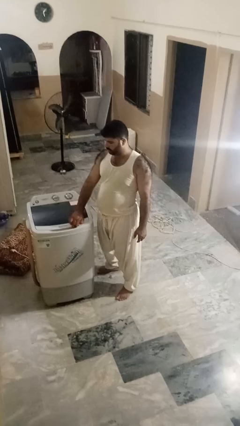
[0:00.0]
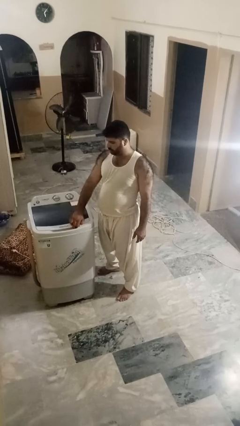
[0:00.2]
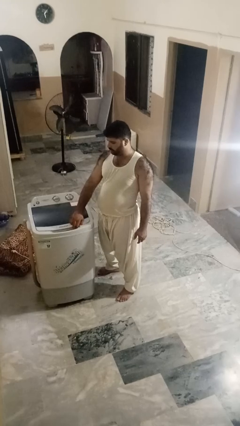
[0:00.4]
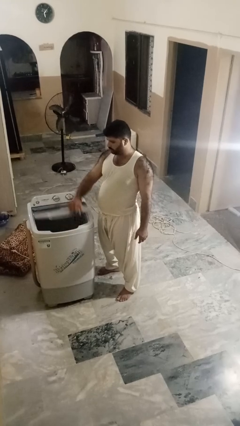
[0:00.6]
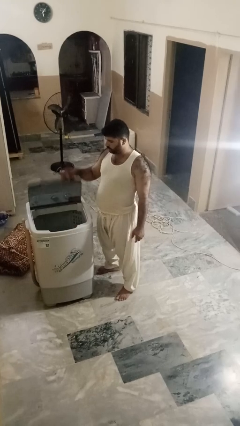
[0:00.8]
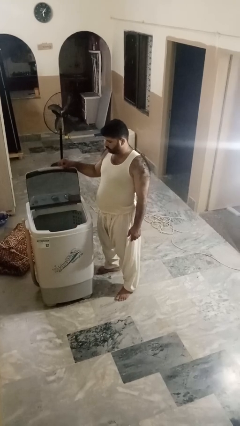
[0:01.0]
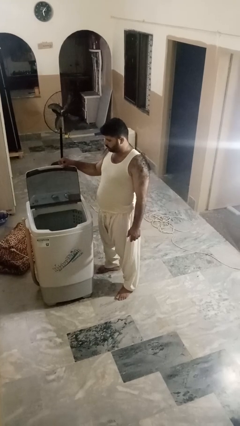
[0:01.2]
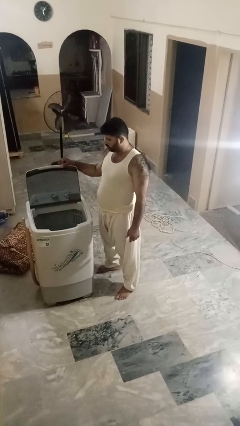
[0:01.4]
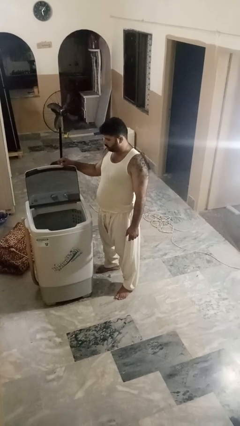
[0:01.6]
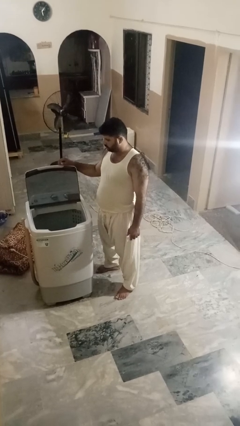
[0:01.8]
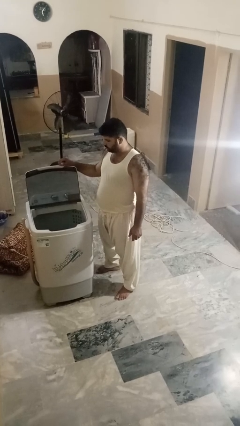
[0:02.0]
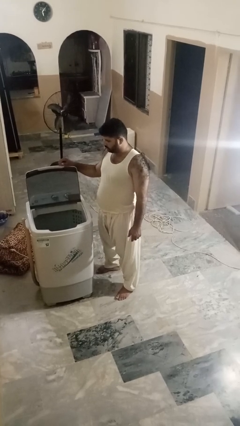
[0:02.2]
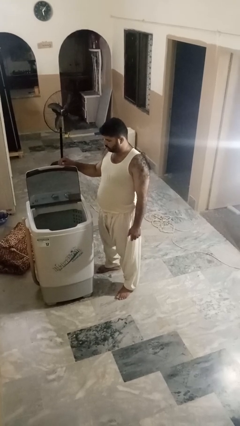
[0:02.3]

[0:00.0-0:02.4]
person opens clothes washer

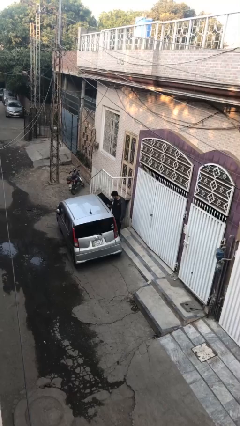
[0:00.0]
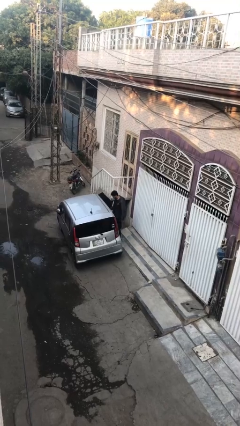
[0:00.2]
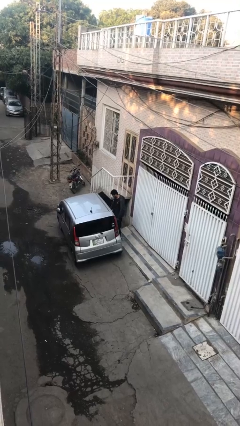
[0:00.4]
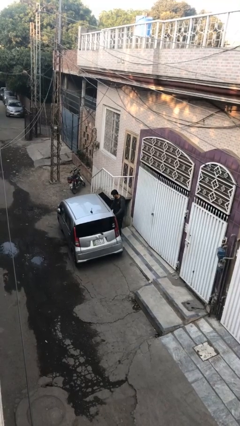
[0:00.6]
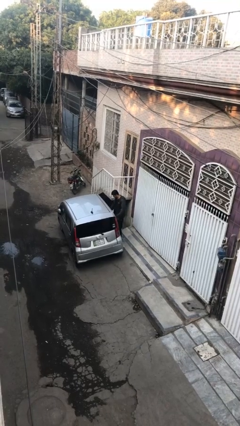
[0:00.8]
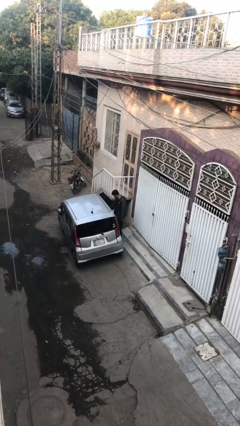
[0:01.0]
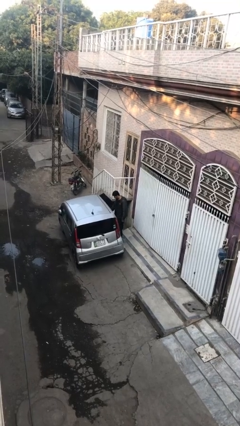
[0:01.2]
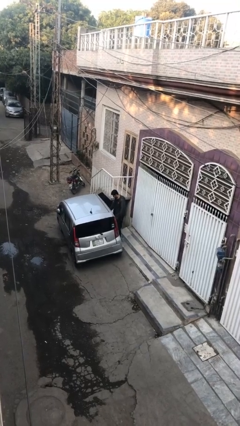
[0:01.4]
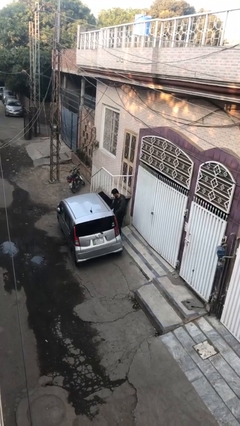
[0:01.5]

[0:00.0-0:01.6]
person closes car door

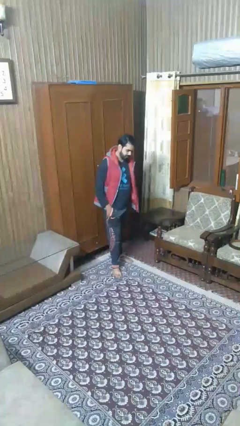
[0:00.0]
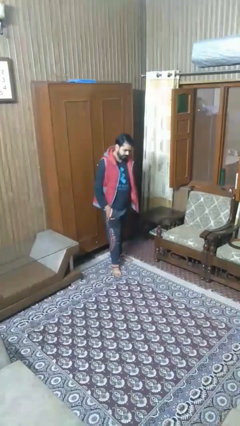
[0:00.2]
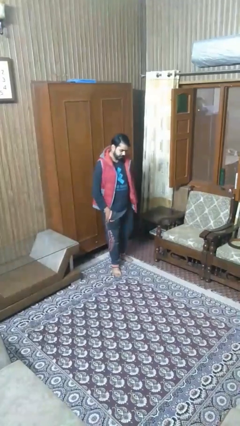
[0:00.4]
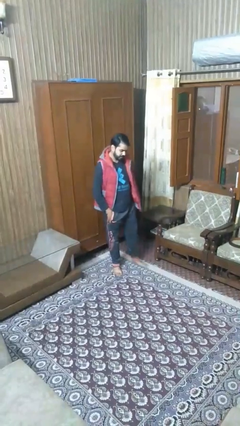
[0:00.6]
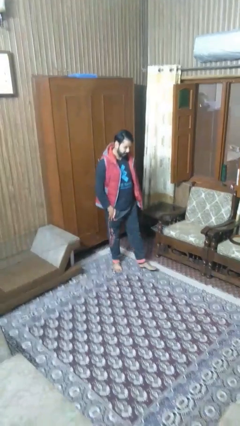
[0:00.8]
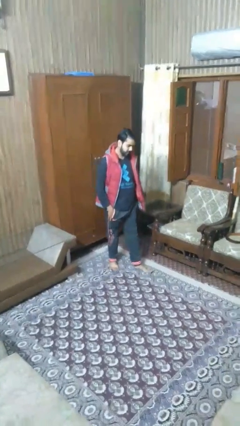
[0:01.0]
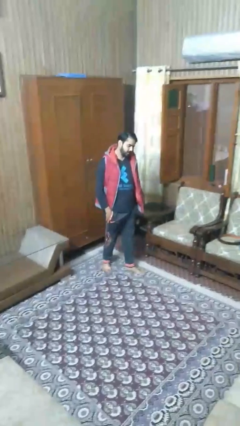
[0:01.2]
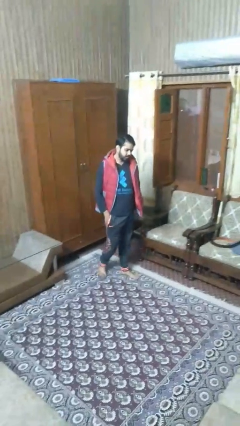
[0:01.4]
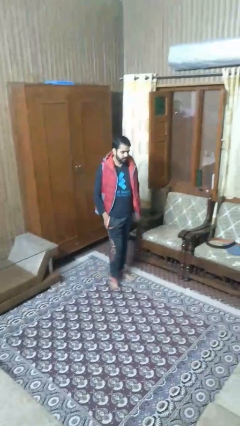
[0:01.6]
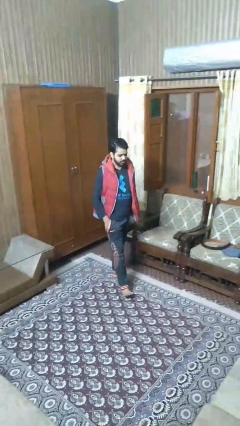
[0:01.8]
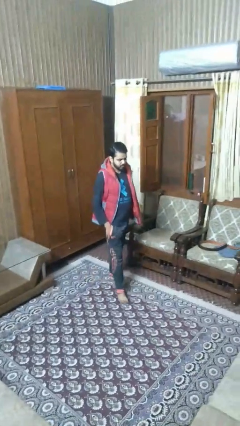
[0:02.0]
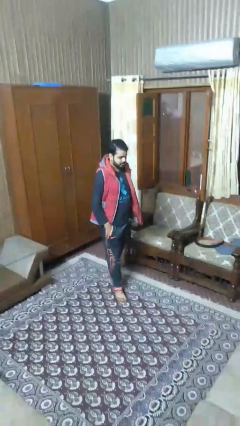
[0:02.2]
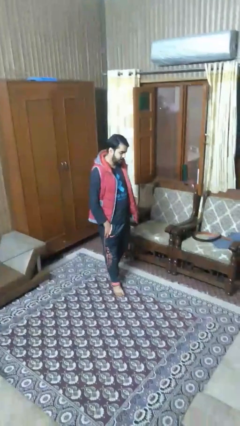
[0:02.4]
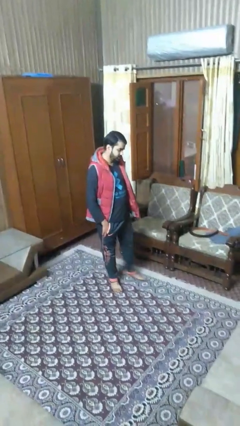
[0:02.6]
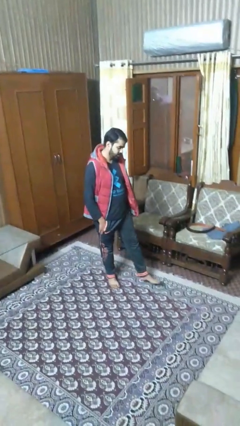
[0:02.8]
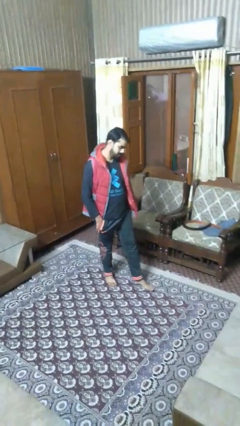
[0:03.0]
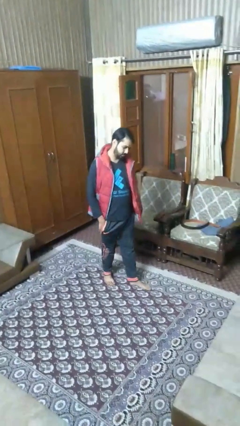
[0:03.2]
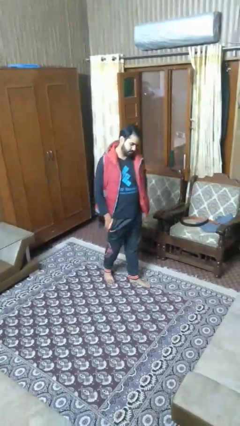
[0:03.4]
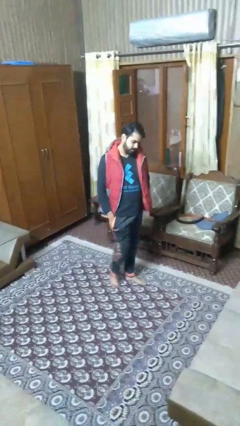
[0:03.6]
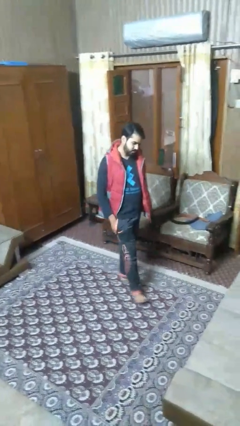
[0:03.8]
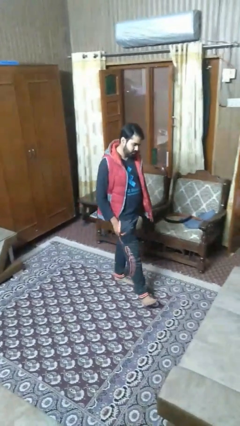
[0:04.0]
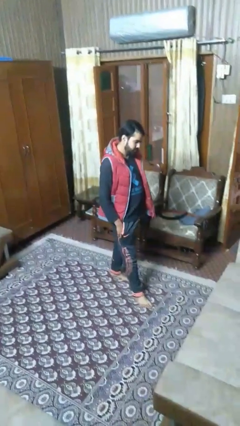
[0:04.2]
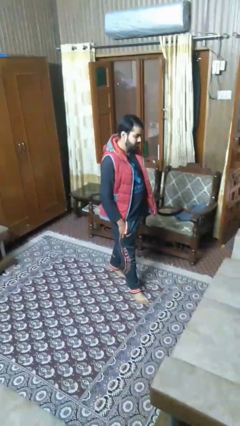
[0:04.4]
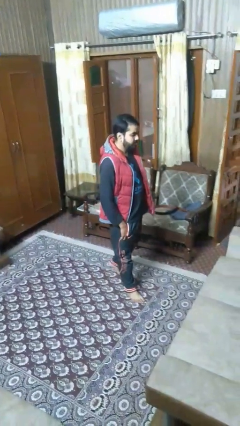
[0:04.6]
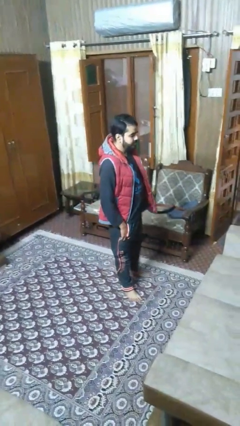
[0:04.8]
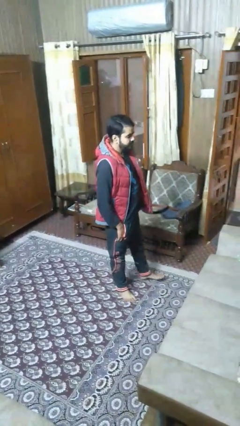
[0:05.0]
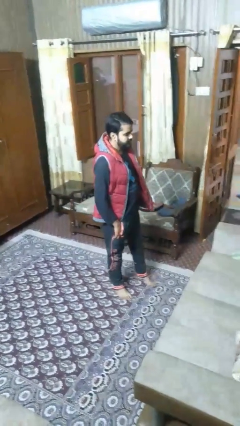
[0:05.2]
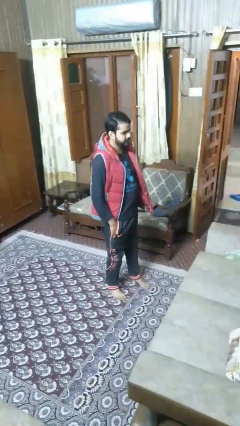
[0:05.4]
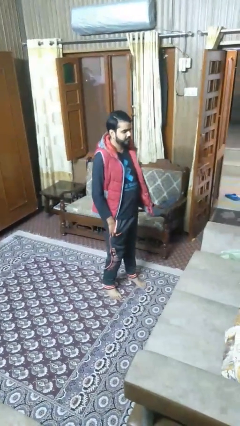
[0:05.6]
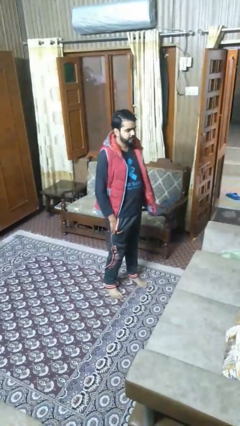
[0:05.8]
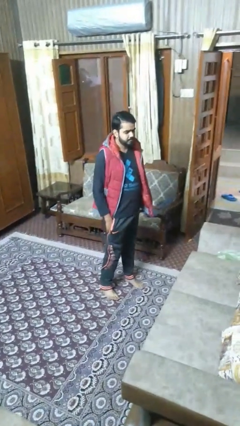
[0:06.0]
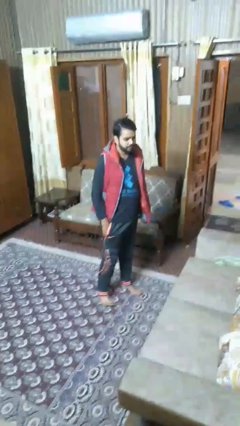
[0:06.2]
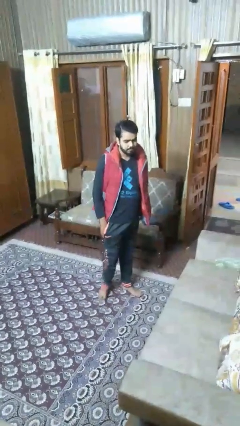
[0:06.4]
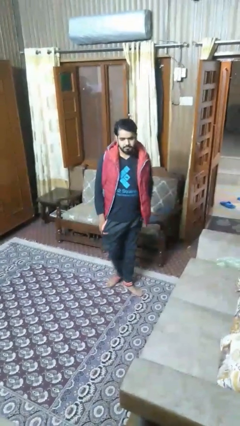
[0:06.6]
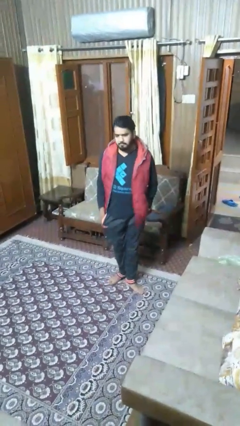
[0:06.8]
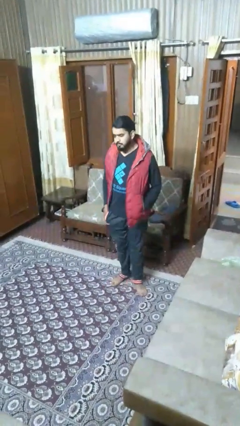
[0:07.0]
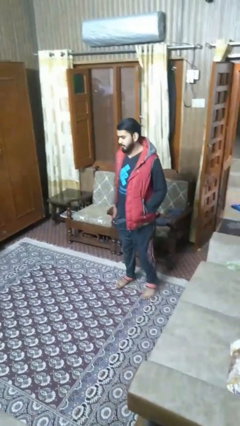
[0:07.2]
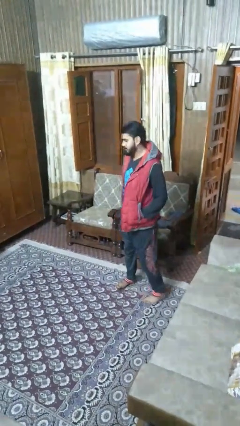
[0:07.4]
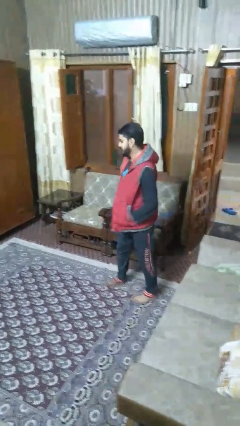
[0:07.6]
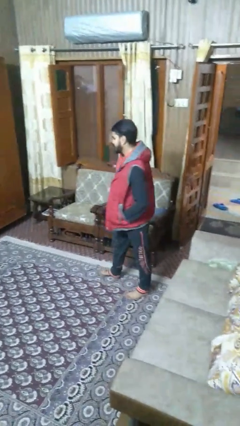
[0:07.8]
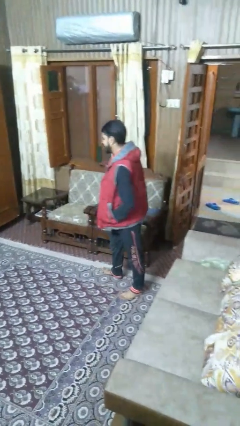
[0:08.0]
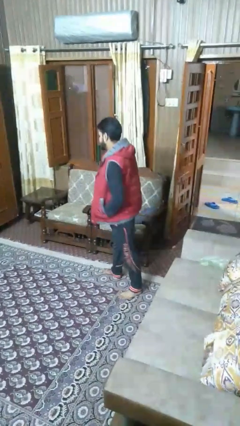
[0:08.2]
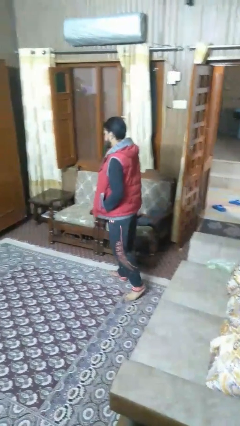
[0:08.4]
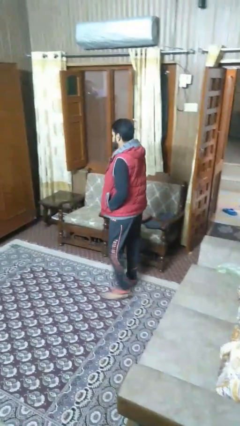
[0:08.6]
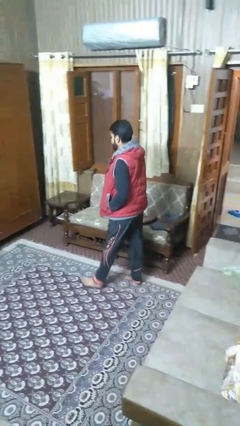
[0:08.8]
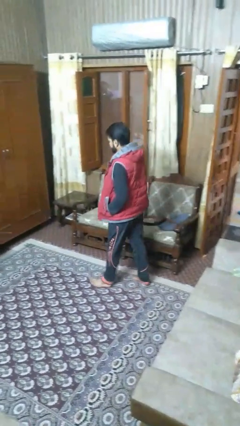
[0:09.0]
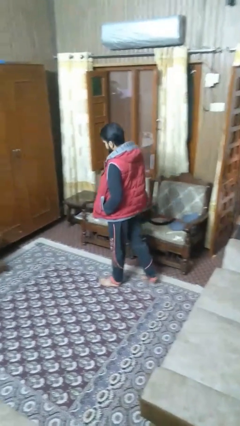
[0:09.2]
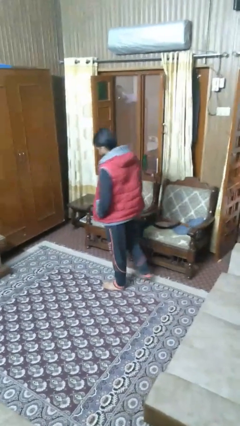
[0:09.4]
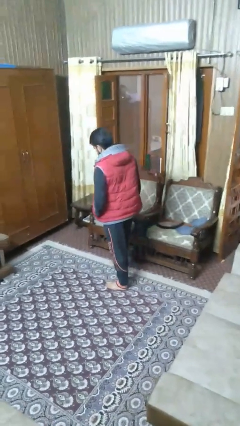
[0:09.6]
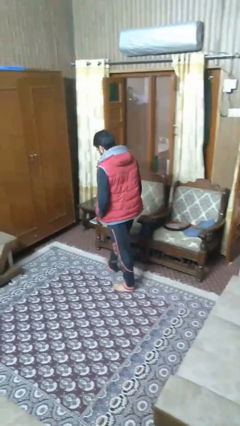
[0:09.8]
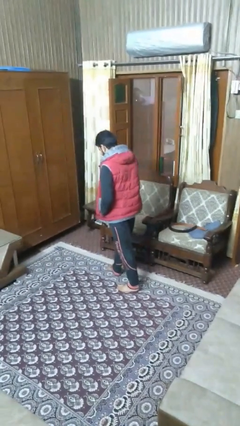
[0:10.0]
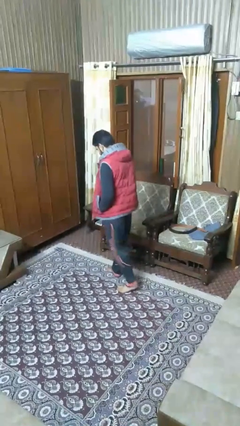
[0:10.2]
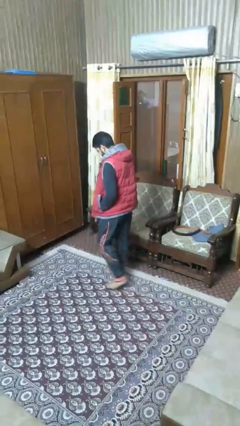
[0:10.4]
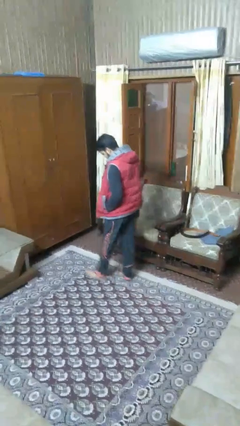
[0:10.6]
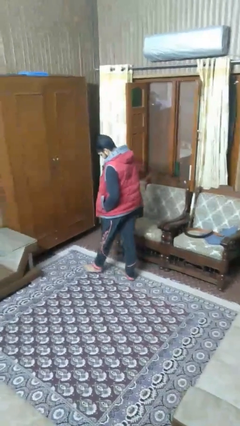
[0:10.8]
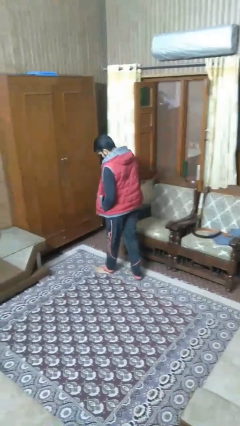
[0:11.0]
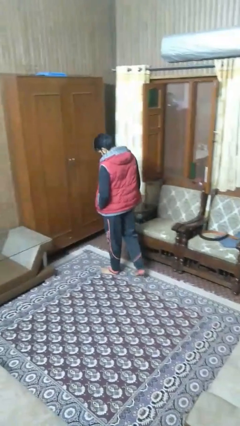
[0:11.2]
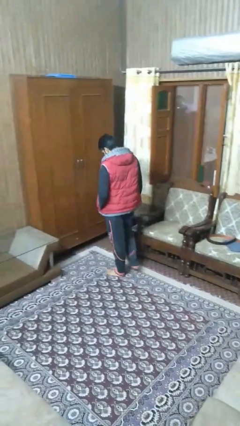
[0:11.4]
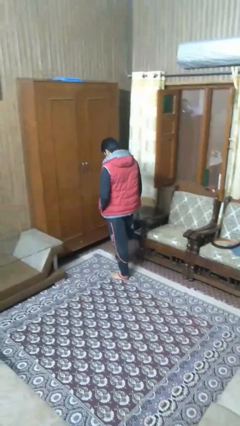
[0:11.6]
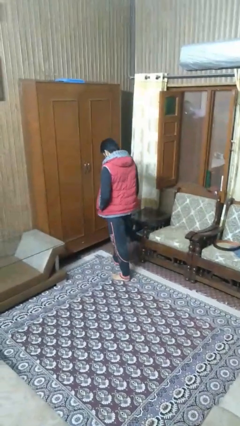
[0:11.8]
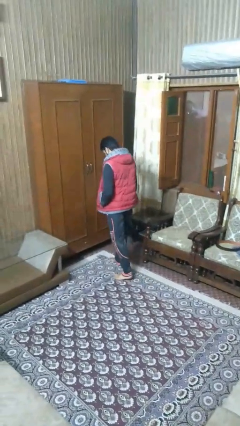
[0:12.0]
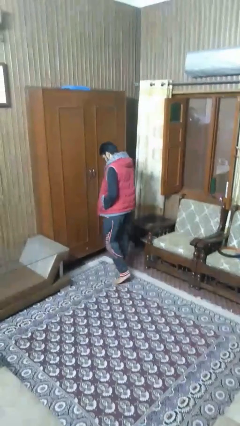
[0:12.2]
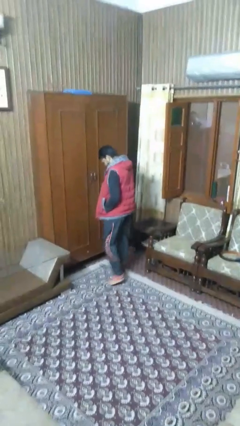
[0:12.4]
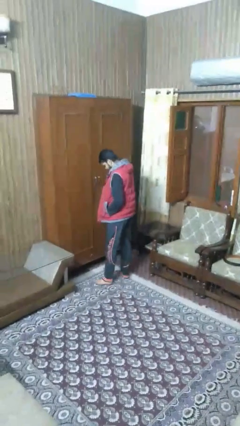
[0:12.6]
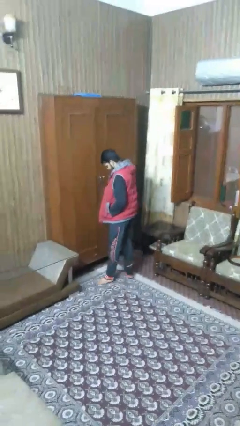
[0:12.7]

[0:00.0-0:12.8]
person walks

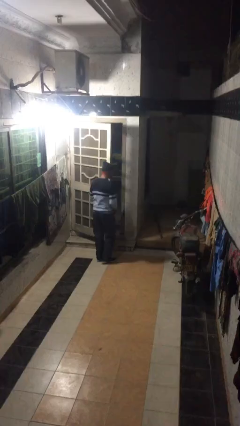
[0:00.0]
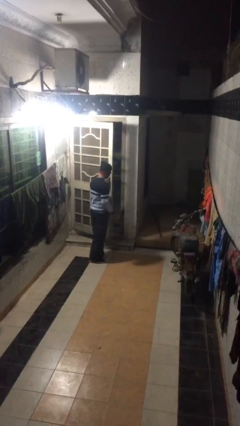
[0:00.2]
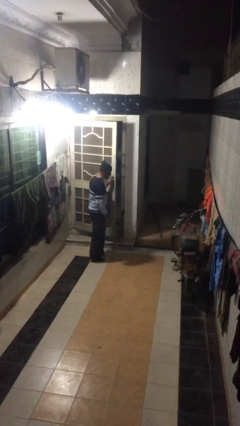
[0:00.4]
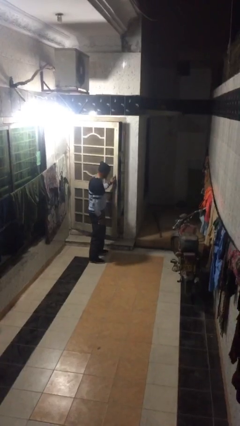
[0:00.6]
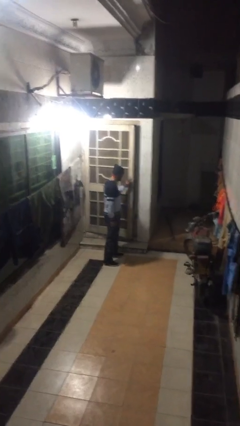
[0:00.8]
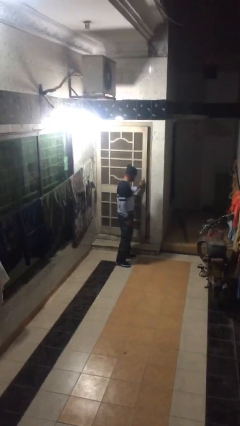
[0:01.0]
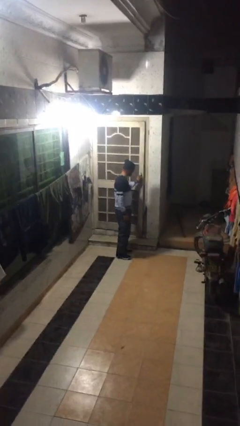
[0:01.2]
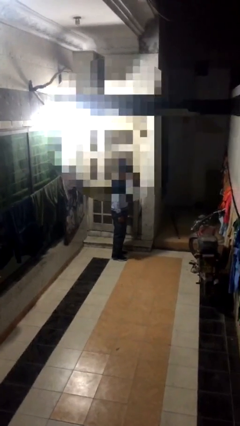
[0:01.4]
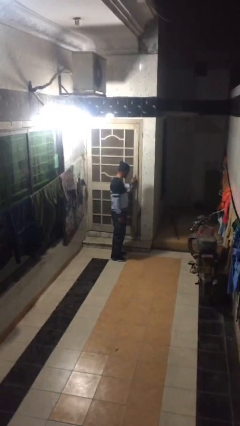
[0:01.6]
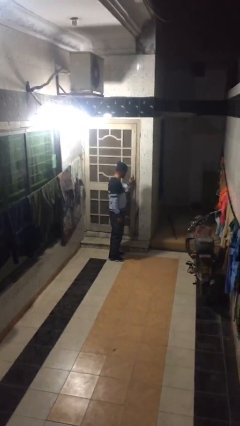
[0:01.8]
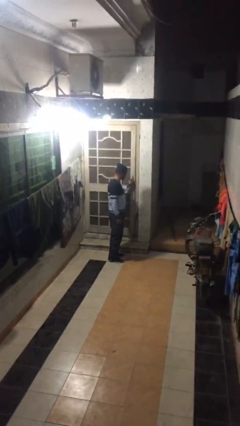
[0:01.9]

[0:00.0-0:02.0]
person closes facility door
